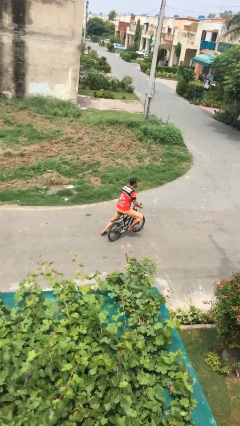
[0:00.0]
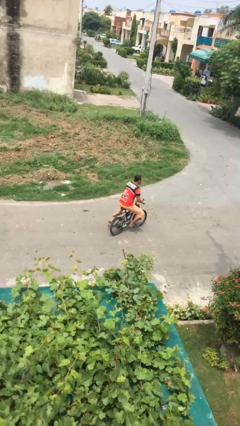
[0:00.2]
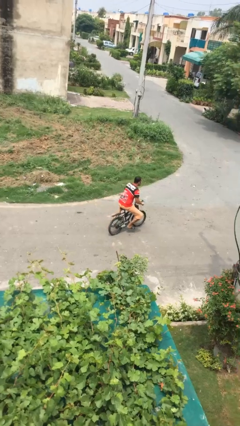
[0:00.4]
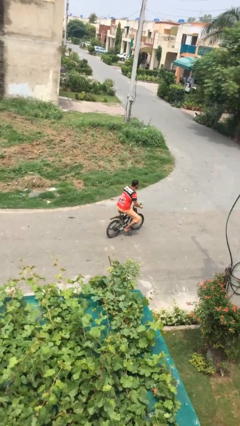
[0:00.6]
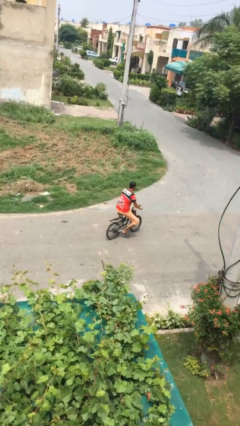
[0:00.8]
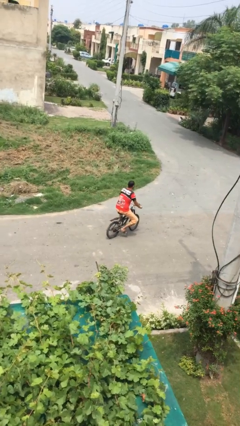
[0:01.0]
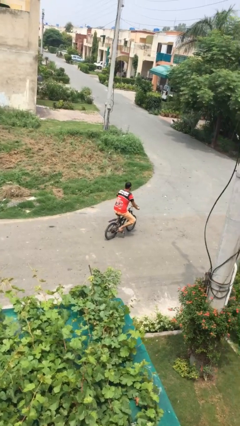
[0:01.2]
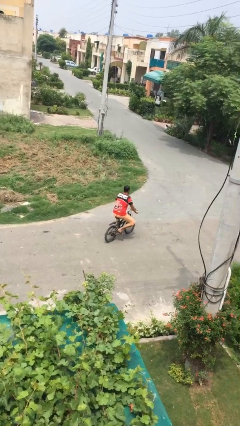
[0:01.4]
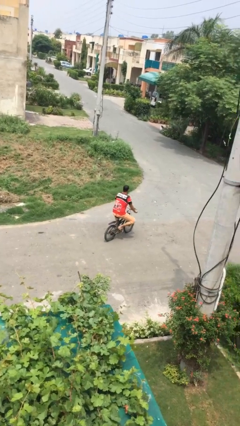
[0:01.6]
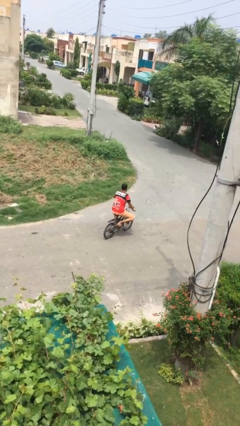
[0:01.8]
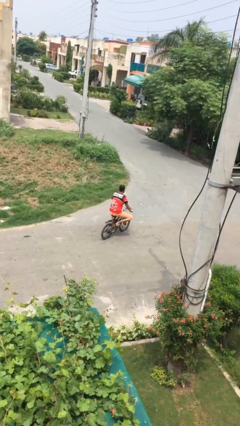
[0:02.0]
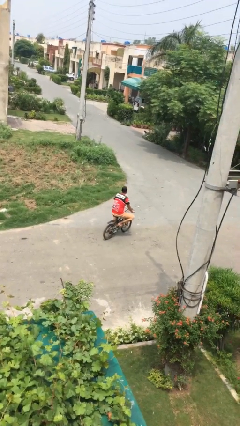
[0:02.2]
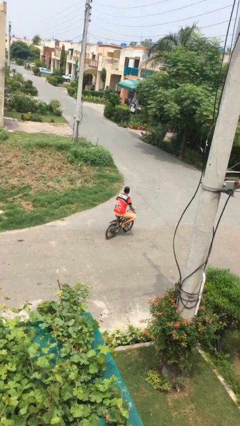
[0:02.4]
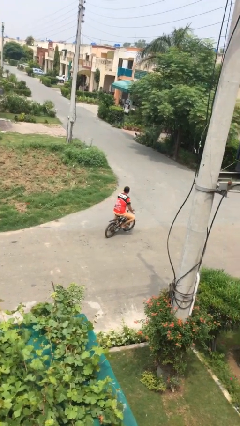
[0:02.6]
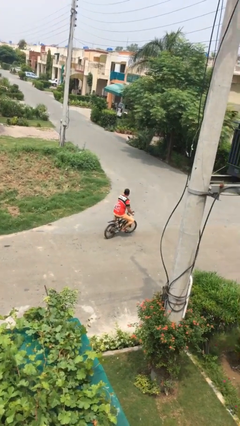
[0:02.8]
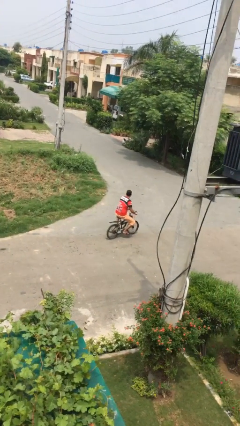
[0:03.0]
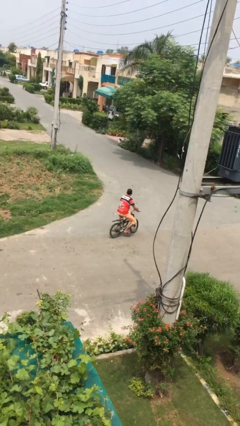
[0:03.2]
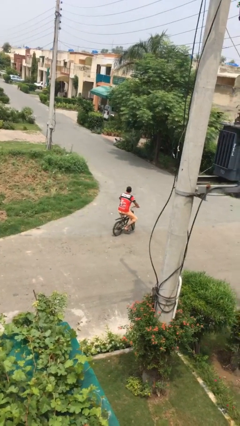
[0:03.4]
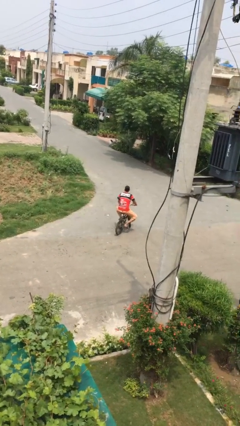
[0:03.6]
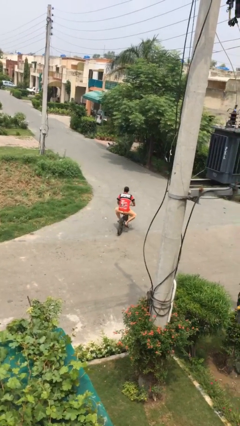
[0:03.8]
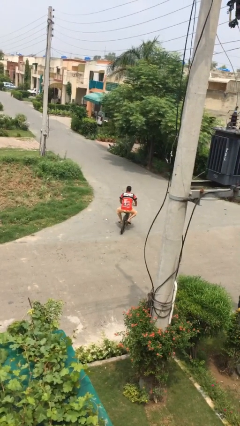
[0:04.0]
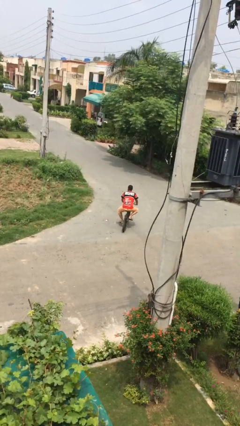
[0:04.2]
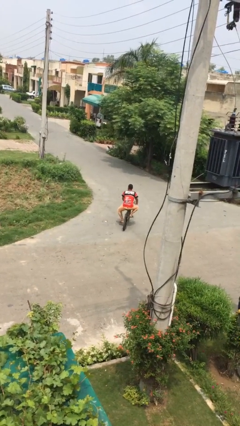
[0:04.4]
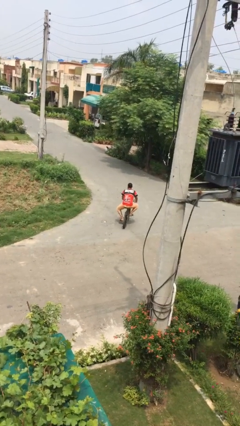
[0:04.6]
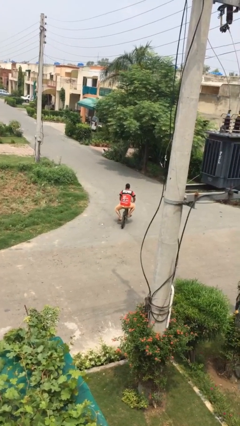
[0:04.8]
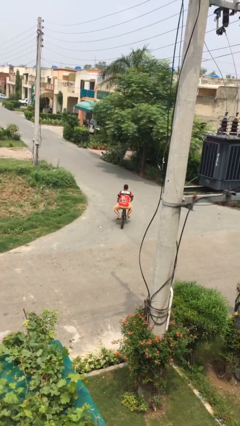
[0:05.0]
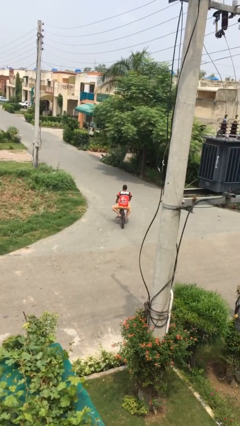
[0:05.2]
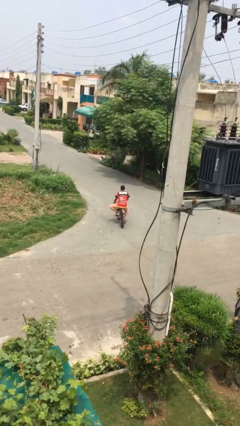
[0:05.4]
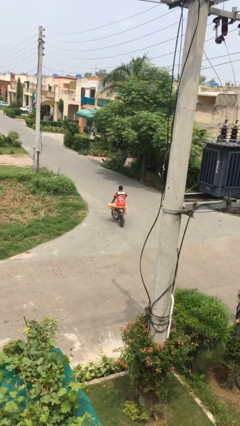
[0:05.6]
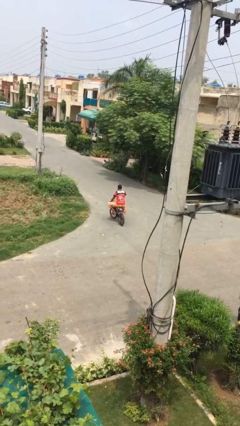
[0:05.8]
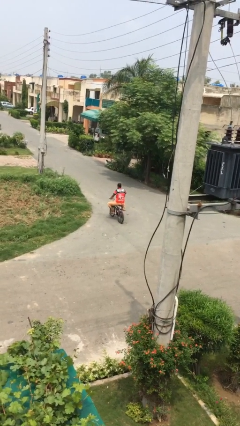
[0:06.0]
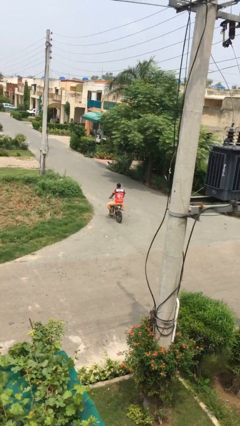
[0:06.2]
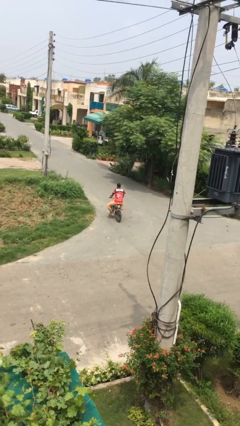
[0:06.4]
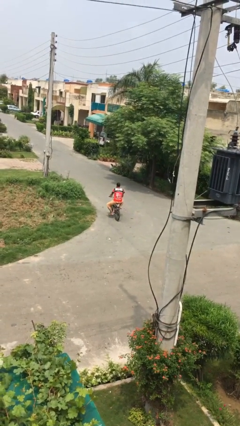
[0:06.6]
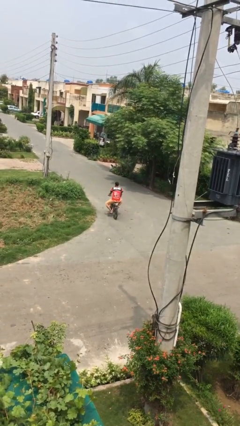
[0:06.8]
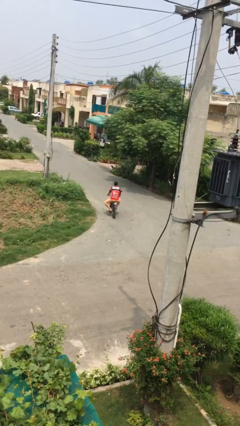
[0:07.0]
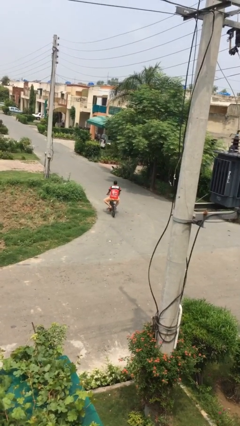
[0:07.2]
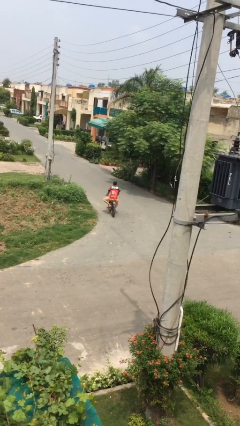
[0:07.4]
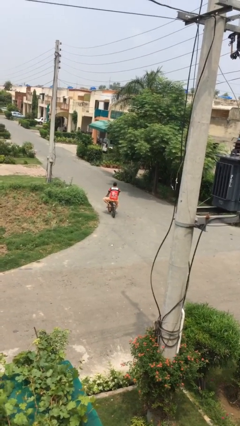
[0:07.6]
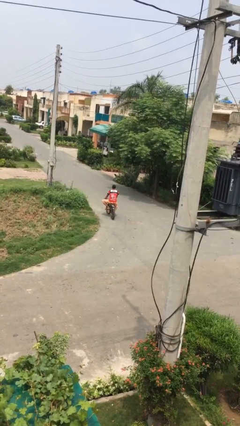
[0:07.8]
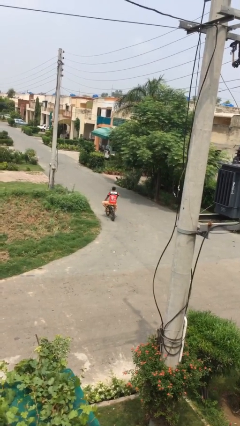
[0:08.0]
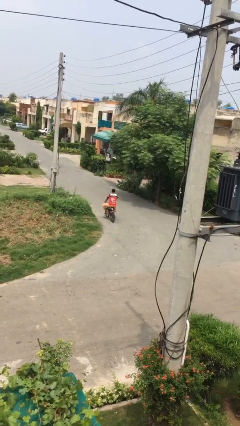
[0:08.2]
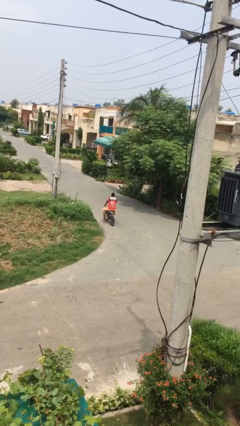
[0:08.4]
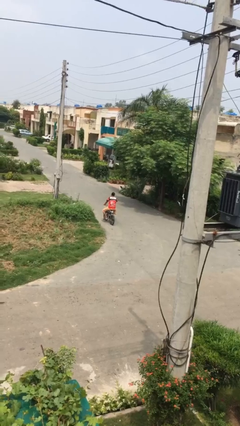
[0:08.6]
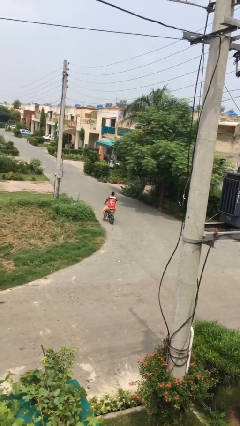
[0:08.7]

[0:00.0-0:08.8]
person rides bicycle

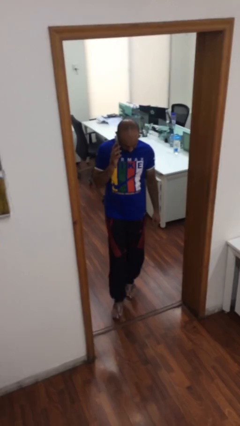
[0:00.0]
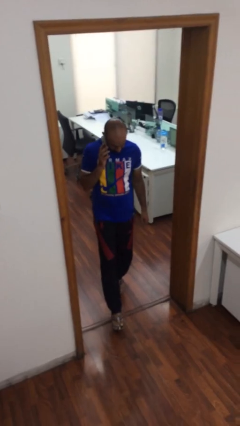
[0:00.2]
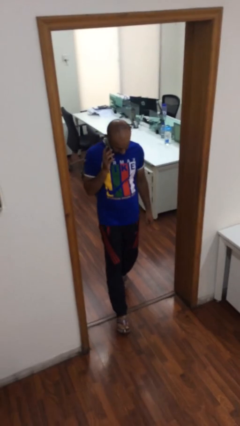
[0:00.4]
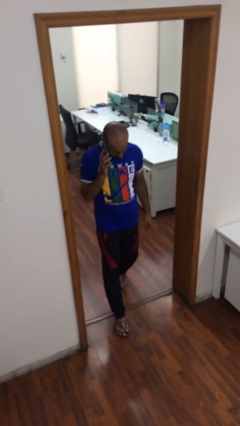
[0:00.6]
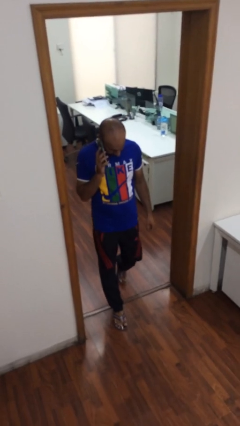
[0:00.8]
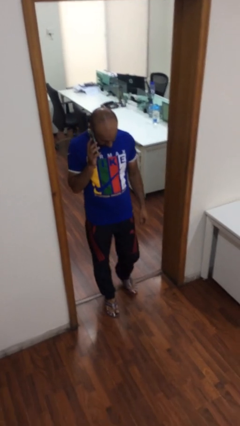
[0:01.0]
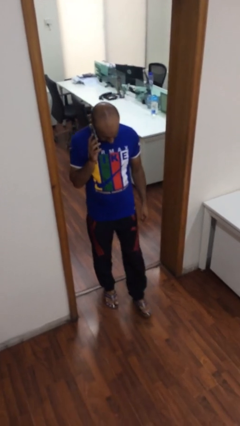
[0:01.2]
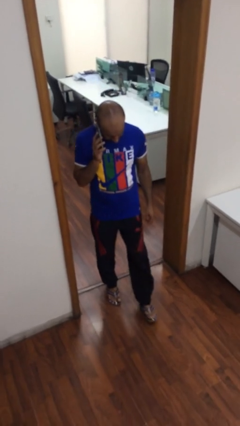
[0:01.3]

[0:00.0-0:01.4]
person enters scene through structure

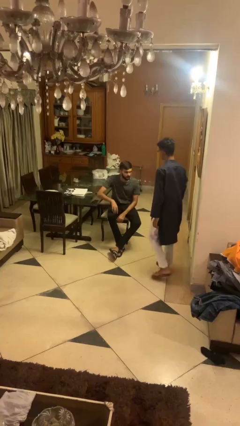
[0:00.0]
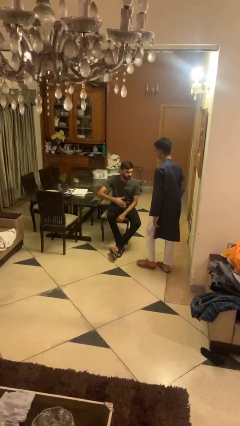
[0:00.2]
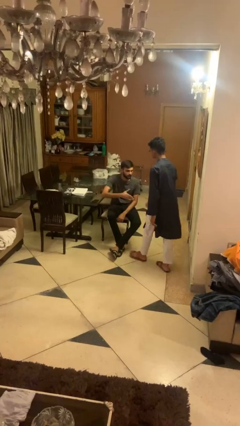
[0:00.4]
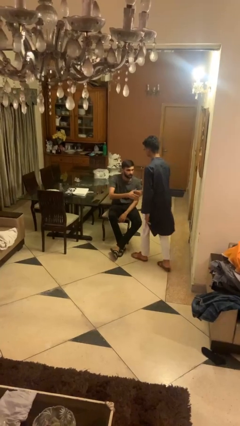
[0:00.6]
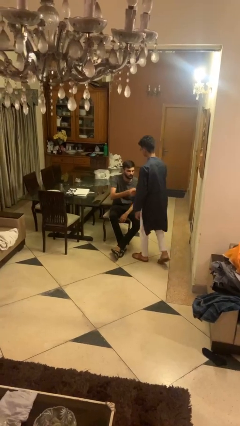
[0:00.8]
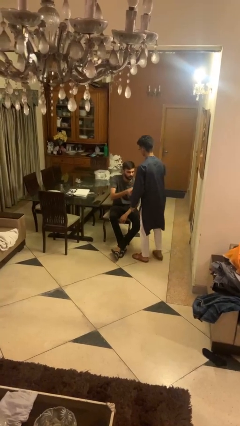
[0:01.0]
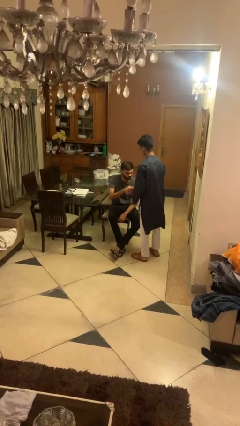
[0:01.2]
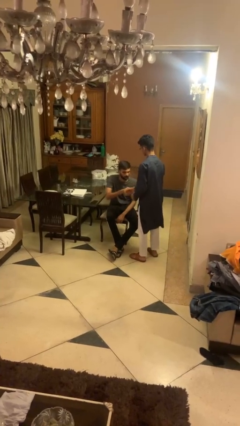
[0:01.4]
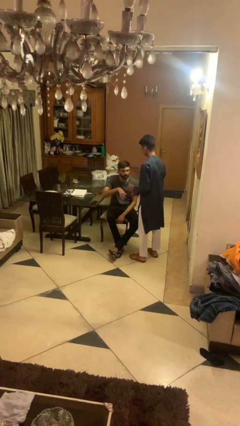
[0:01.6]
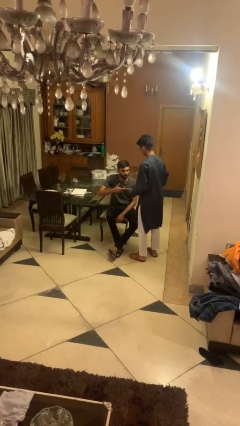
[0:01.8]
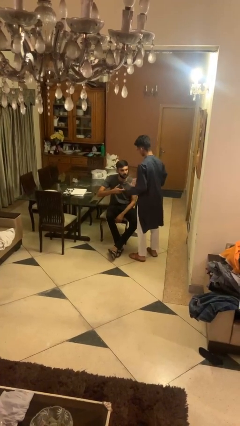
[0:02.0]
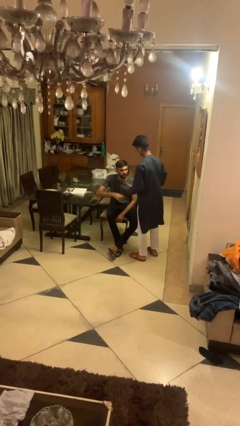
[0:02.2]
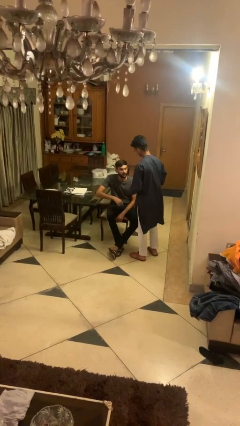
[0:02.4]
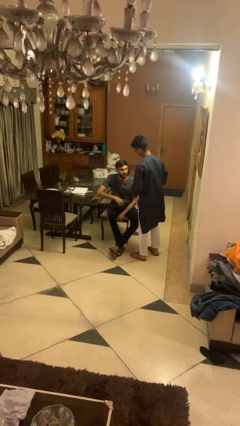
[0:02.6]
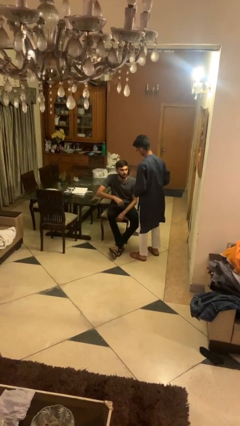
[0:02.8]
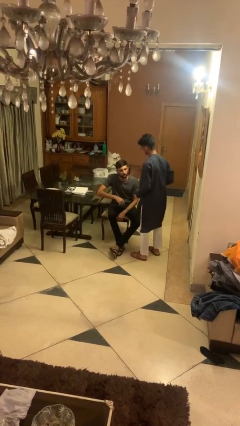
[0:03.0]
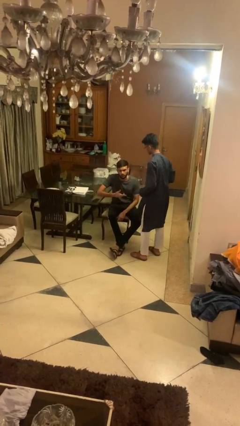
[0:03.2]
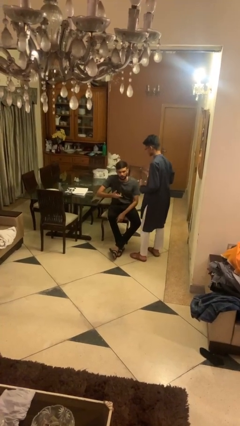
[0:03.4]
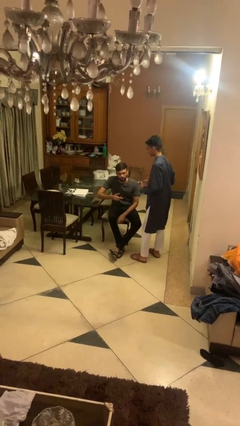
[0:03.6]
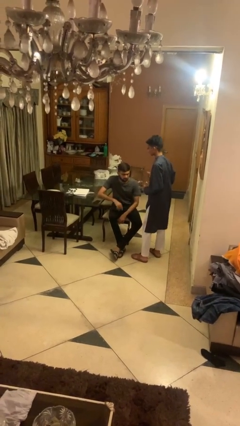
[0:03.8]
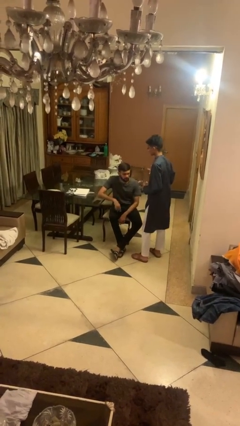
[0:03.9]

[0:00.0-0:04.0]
person shakes hand

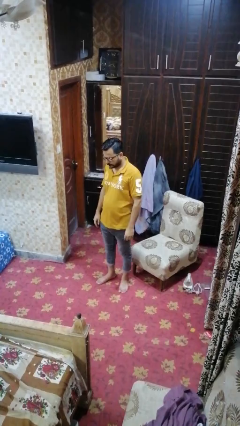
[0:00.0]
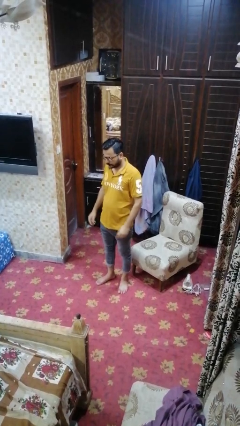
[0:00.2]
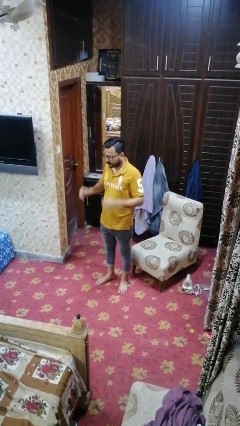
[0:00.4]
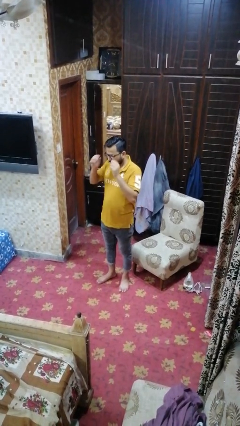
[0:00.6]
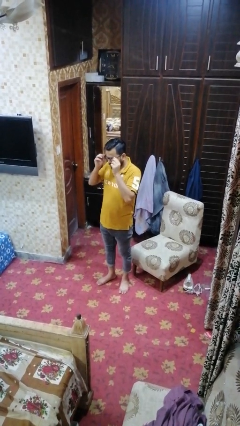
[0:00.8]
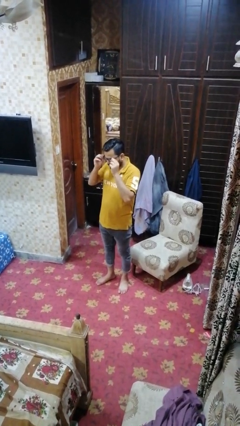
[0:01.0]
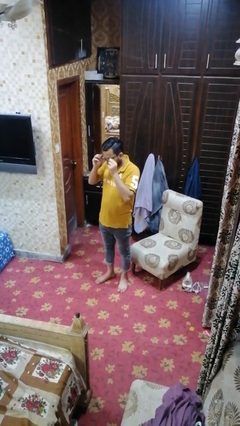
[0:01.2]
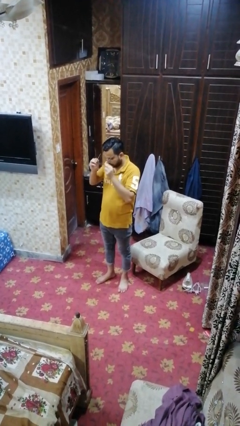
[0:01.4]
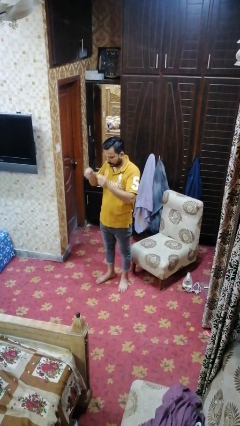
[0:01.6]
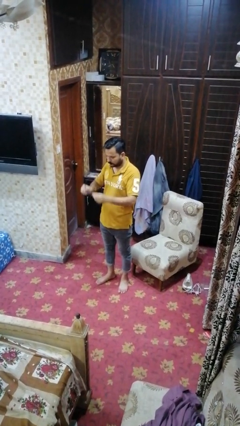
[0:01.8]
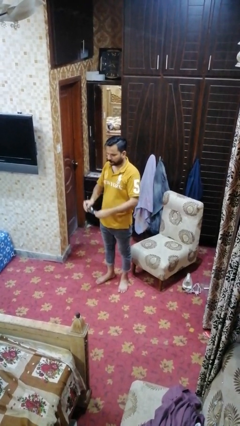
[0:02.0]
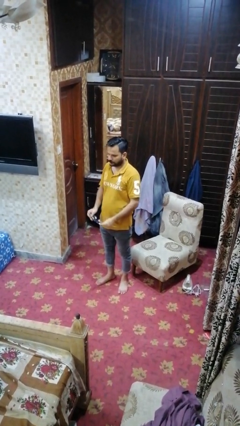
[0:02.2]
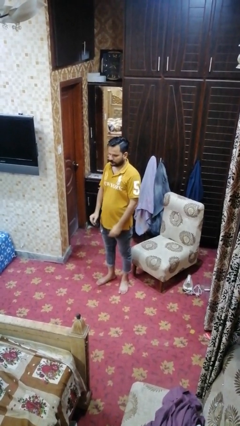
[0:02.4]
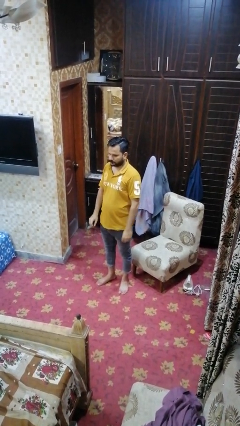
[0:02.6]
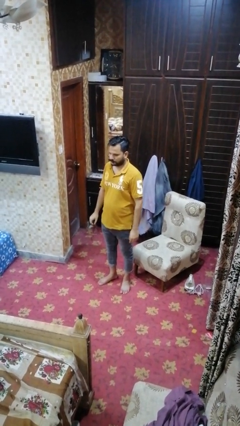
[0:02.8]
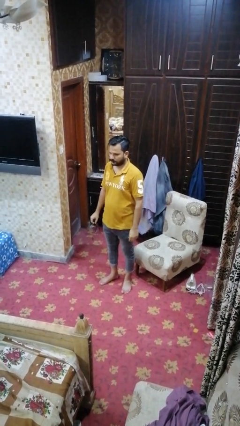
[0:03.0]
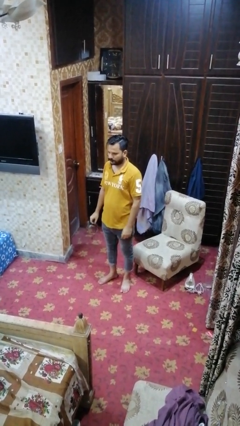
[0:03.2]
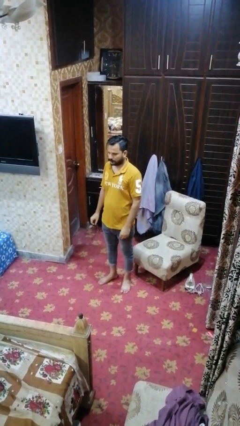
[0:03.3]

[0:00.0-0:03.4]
person takes off glasses

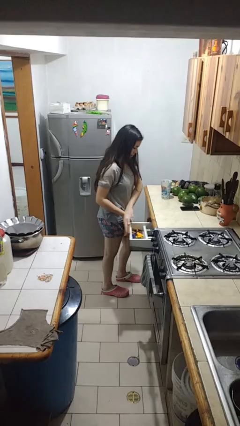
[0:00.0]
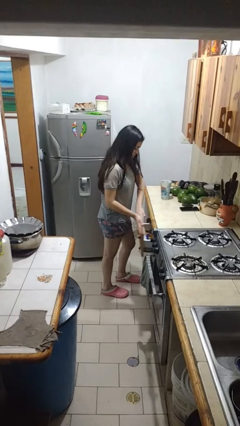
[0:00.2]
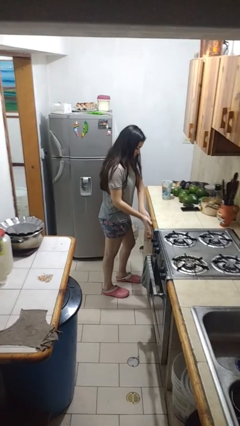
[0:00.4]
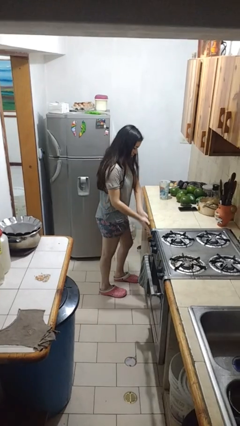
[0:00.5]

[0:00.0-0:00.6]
person closes kitchen drawer
